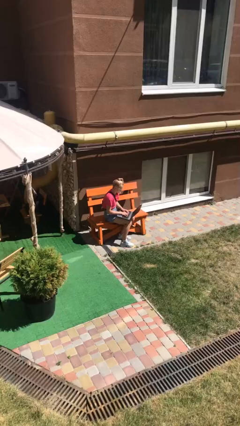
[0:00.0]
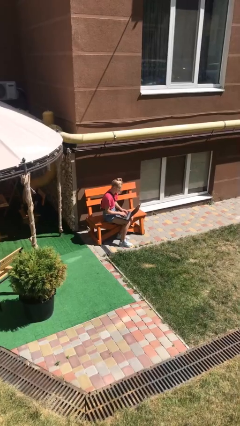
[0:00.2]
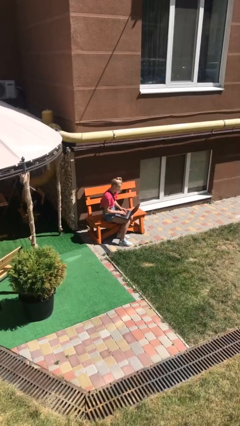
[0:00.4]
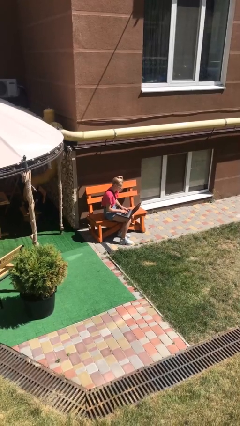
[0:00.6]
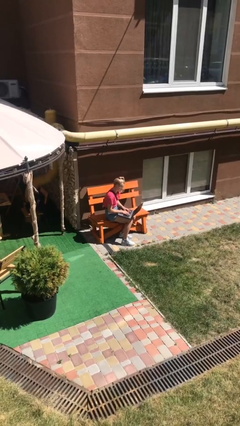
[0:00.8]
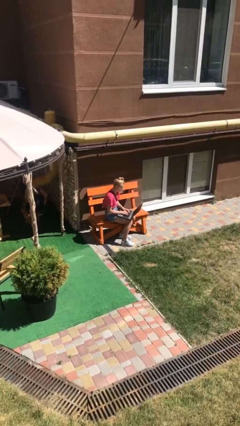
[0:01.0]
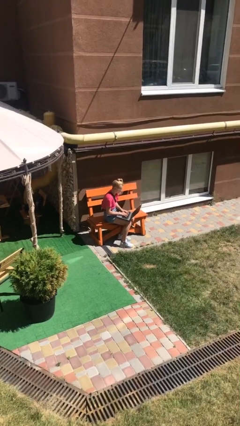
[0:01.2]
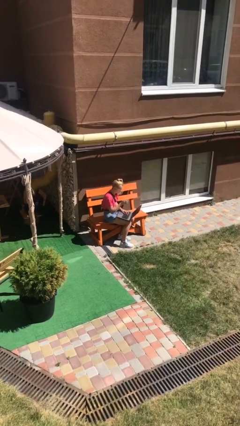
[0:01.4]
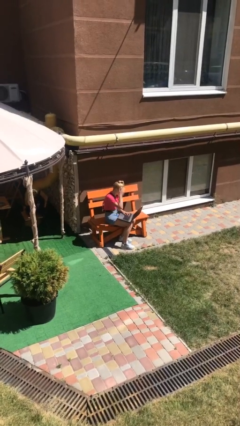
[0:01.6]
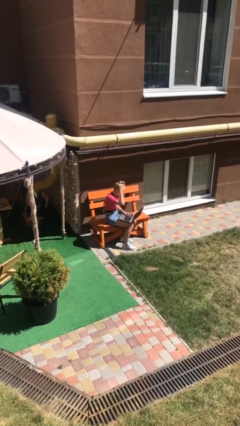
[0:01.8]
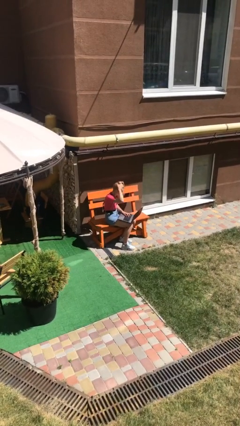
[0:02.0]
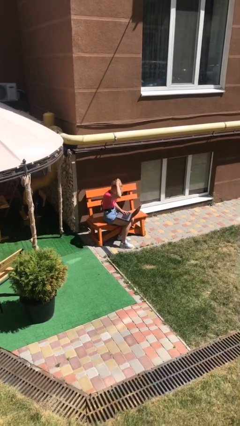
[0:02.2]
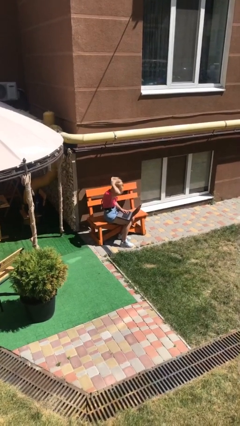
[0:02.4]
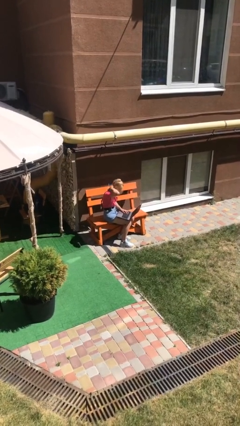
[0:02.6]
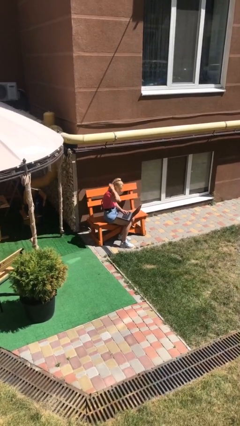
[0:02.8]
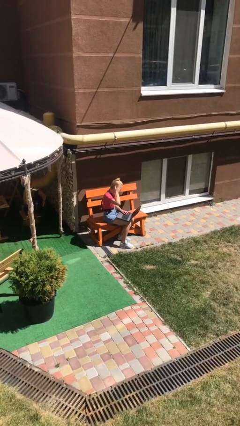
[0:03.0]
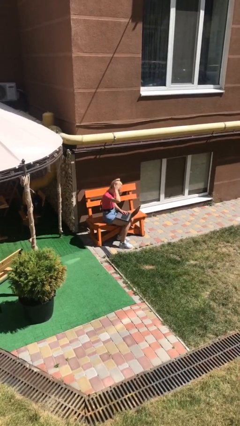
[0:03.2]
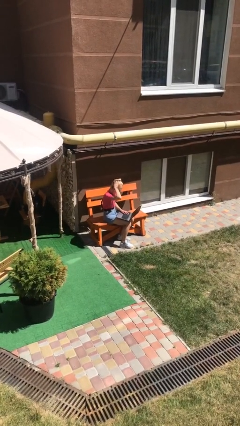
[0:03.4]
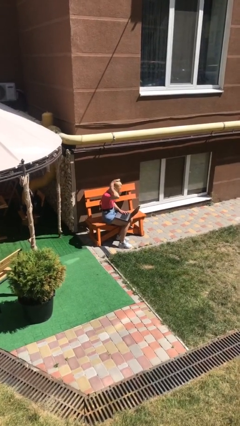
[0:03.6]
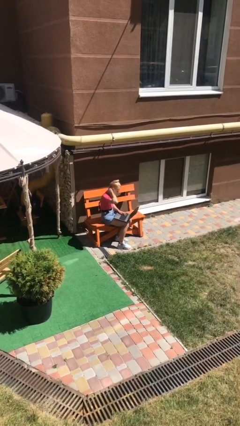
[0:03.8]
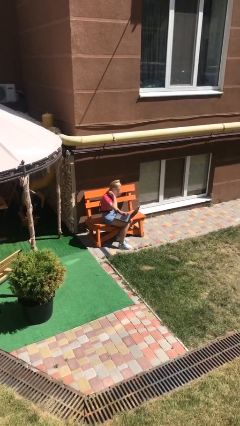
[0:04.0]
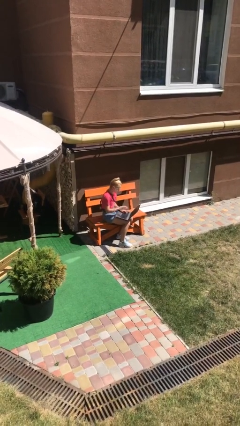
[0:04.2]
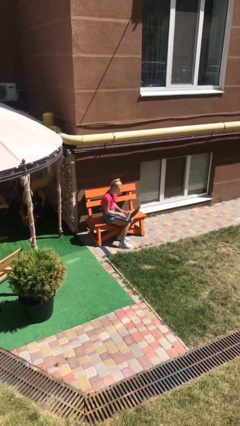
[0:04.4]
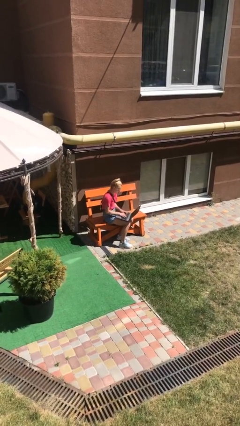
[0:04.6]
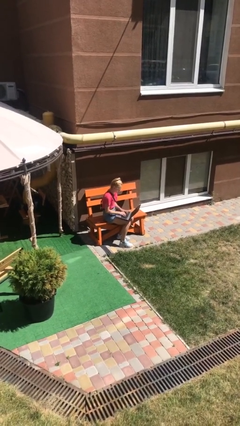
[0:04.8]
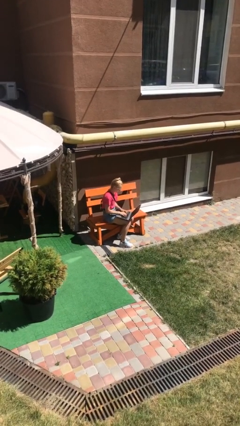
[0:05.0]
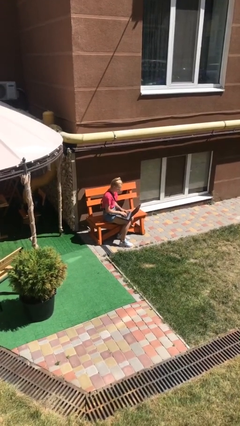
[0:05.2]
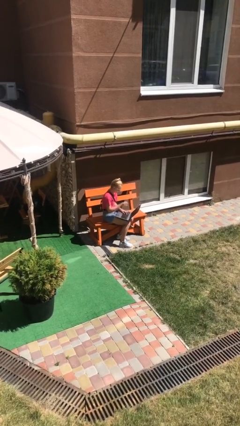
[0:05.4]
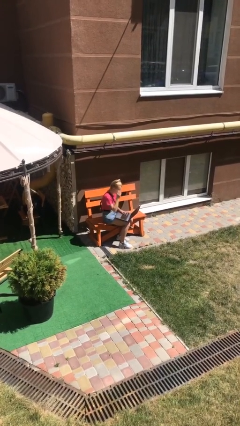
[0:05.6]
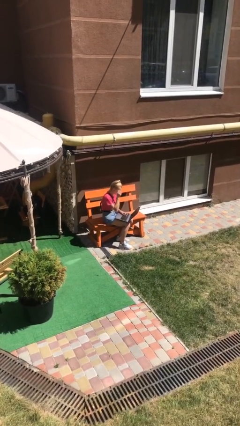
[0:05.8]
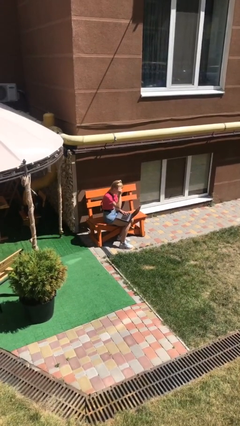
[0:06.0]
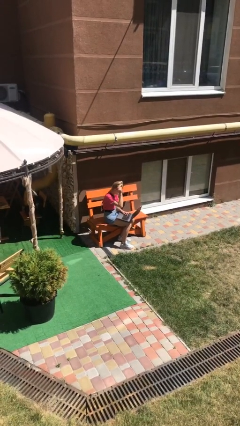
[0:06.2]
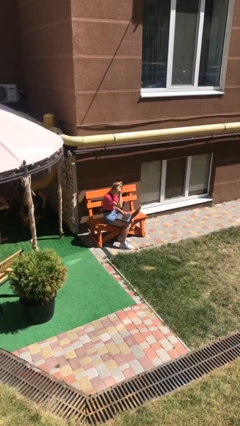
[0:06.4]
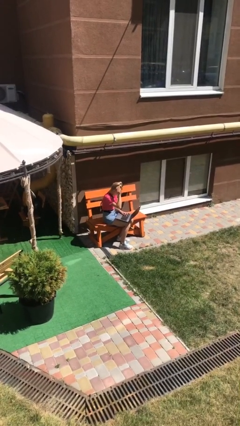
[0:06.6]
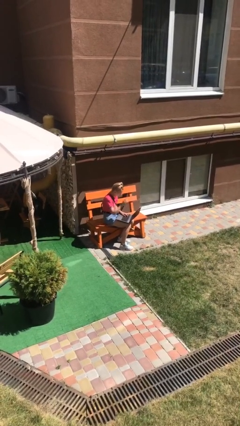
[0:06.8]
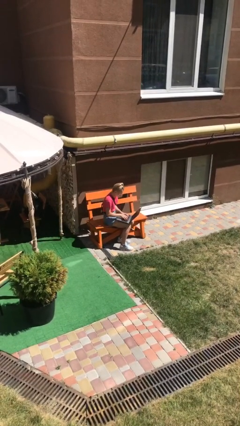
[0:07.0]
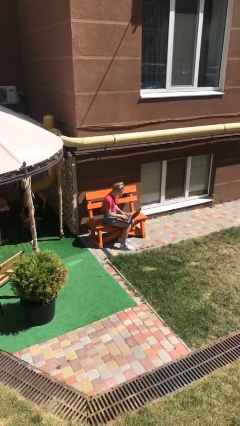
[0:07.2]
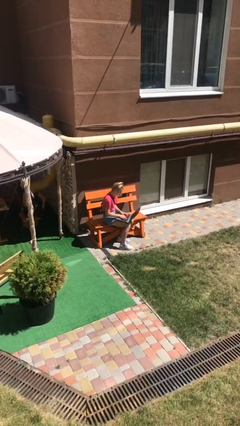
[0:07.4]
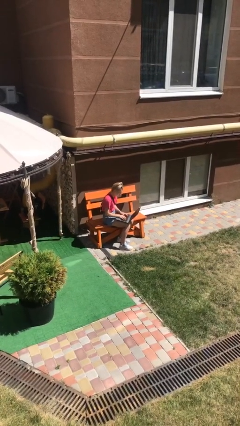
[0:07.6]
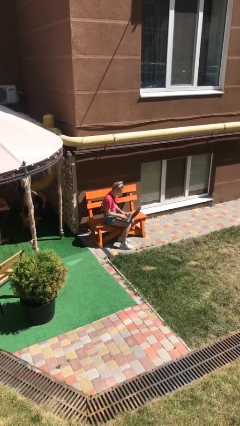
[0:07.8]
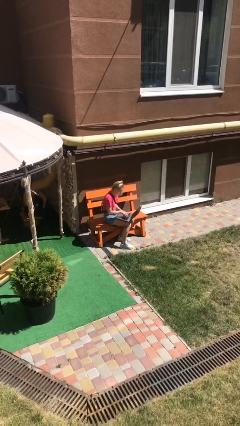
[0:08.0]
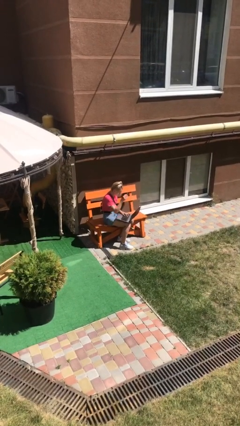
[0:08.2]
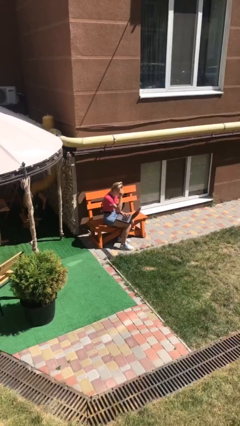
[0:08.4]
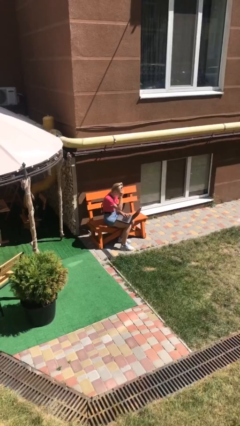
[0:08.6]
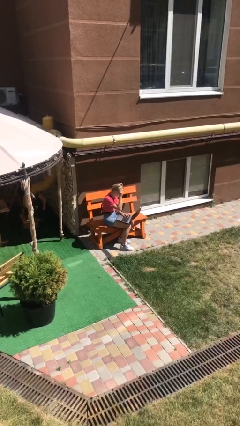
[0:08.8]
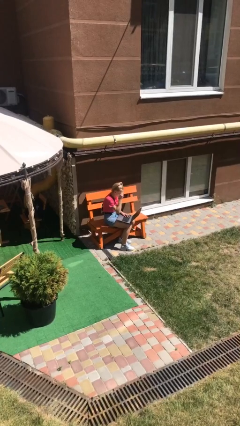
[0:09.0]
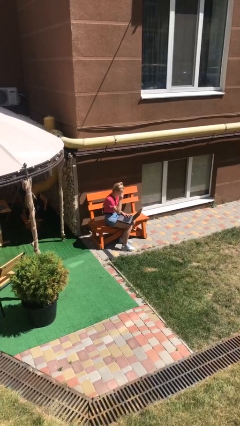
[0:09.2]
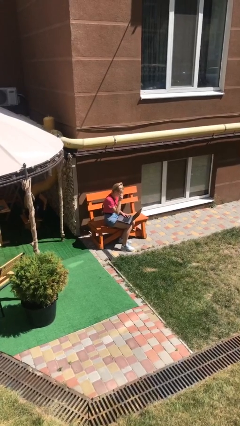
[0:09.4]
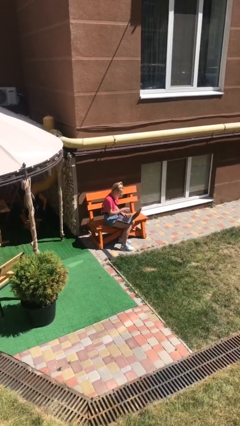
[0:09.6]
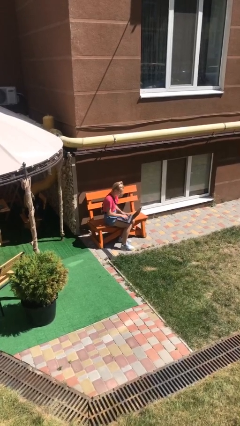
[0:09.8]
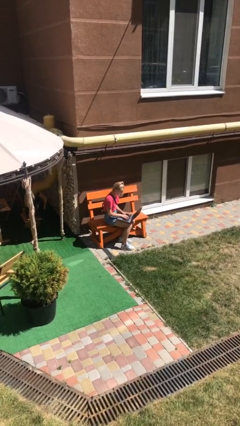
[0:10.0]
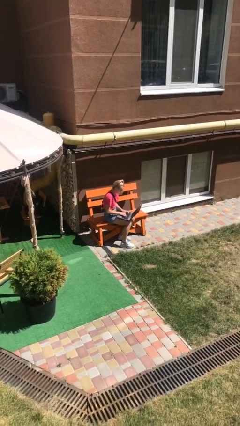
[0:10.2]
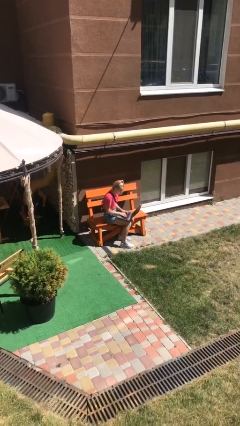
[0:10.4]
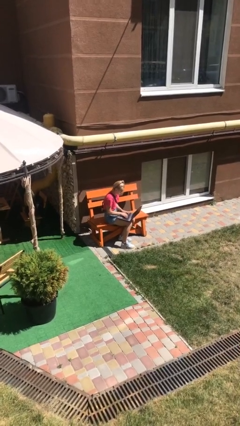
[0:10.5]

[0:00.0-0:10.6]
person interacts with laptop

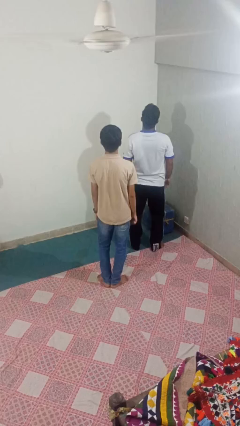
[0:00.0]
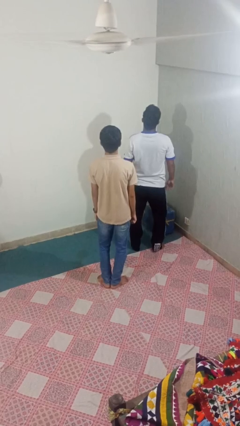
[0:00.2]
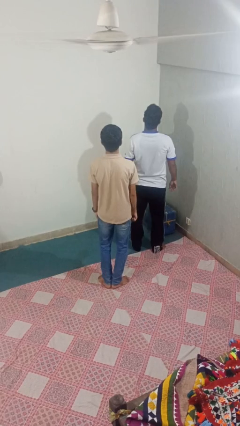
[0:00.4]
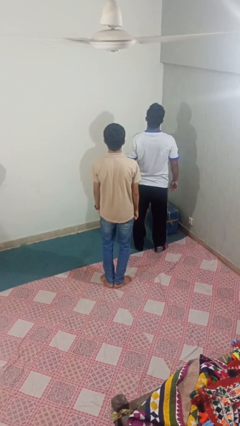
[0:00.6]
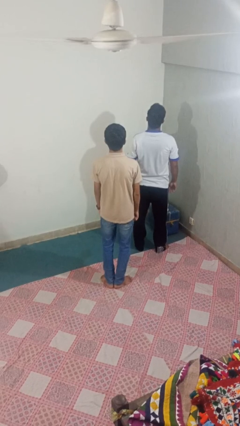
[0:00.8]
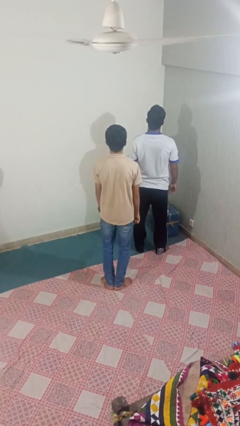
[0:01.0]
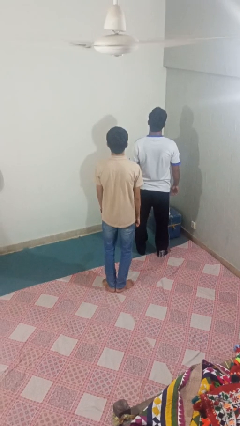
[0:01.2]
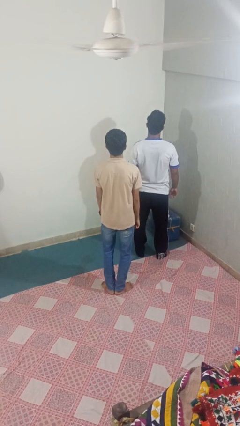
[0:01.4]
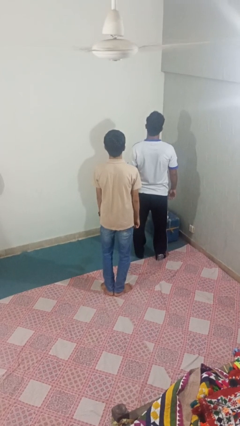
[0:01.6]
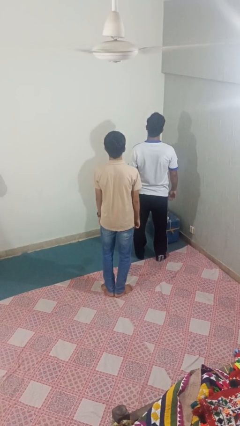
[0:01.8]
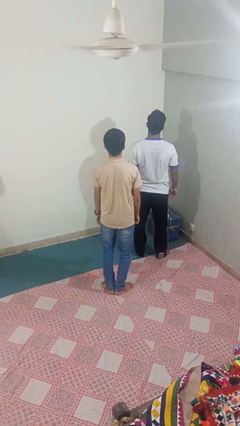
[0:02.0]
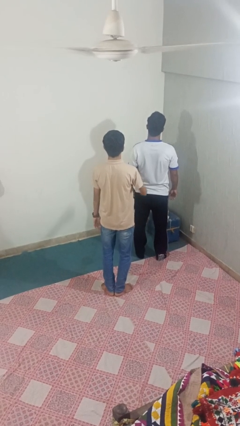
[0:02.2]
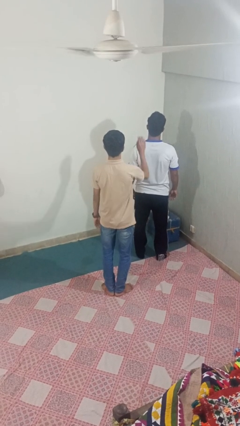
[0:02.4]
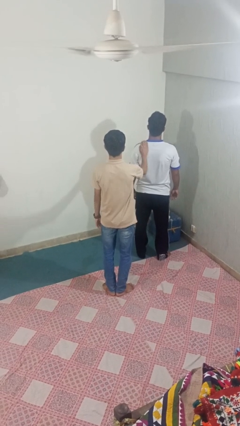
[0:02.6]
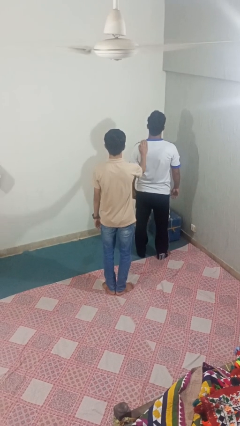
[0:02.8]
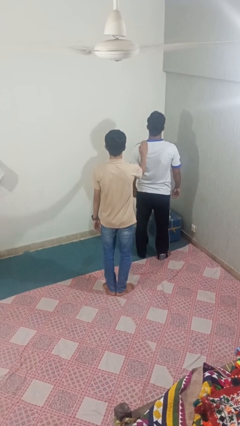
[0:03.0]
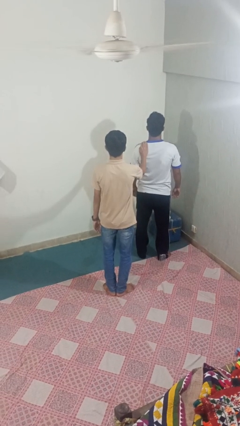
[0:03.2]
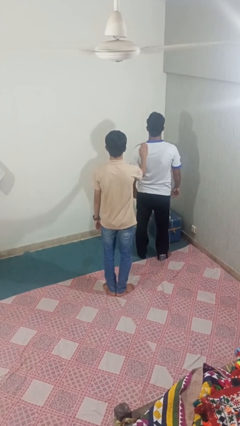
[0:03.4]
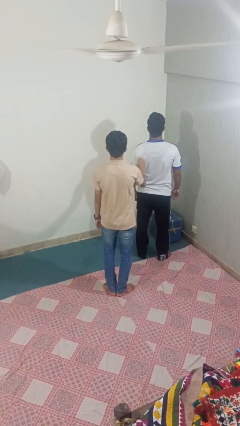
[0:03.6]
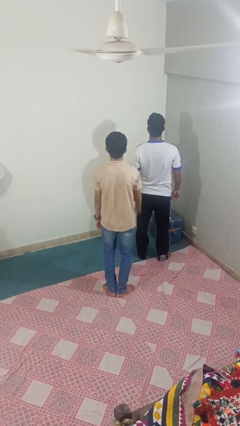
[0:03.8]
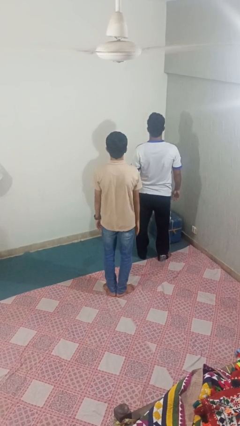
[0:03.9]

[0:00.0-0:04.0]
person touches back of person

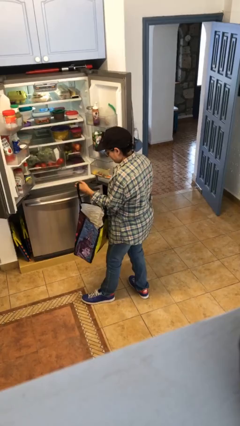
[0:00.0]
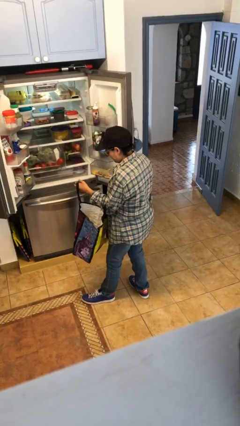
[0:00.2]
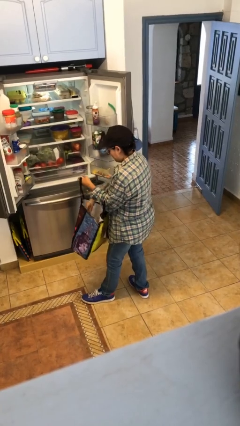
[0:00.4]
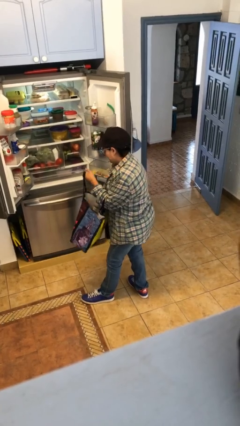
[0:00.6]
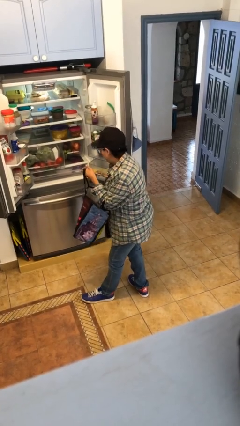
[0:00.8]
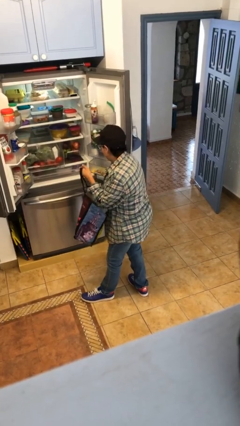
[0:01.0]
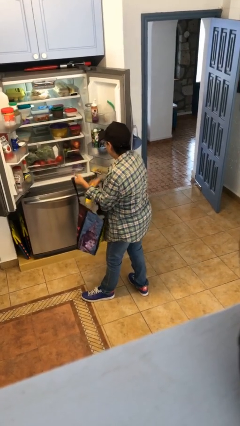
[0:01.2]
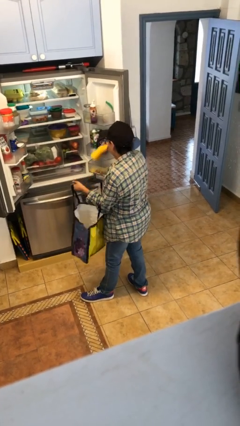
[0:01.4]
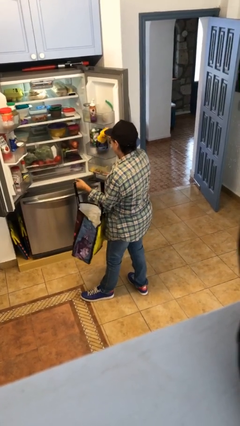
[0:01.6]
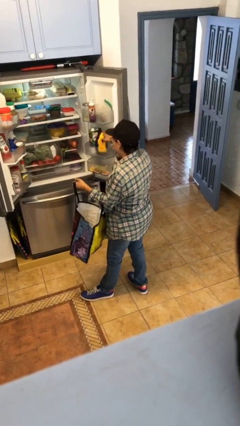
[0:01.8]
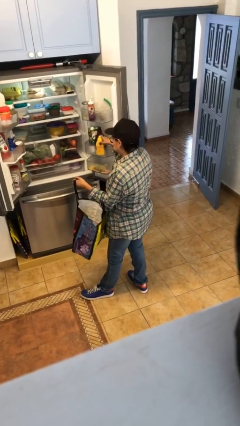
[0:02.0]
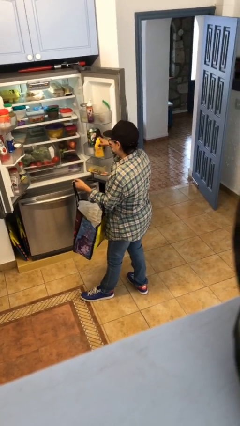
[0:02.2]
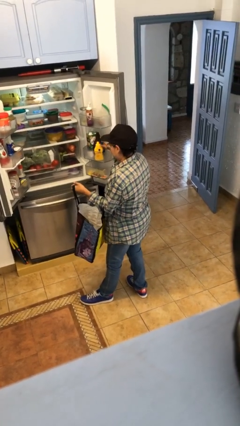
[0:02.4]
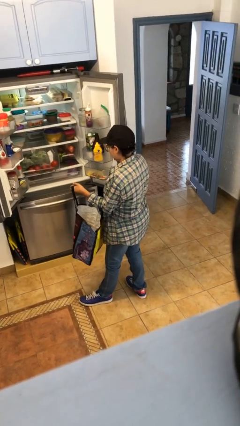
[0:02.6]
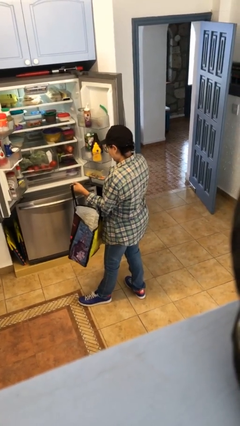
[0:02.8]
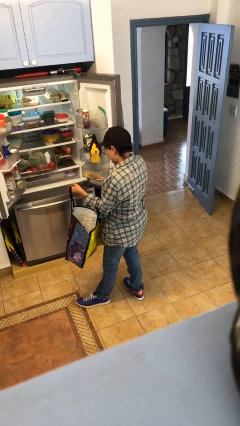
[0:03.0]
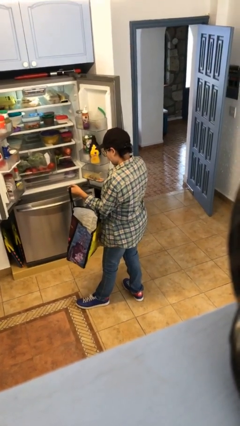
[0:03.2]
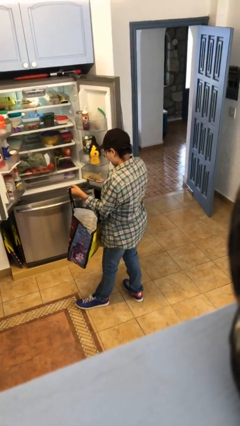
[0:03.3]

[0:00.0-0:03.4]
person loads groceries into refrigerator
